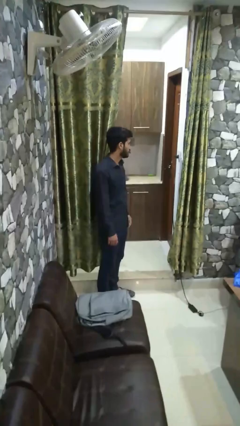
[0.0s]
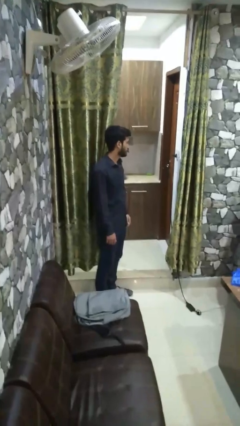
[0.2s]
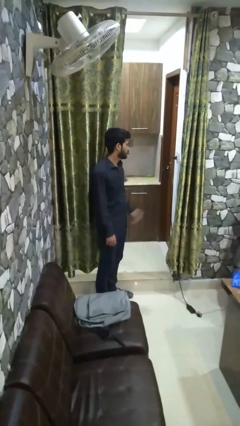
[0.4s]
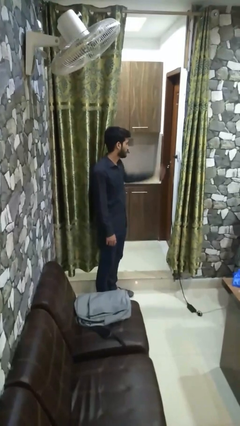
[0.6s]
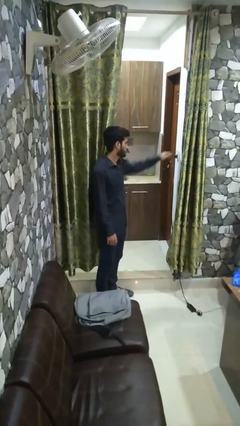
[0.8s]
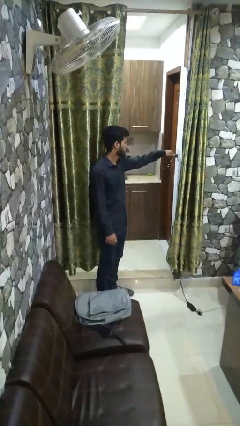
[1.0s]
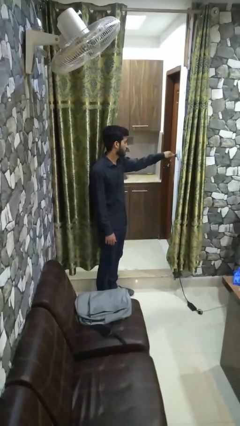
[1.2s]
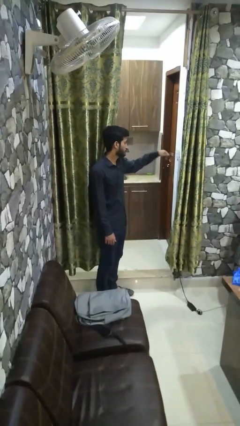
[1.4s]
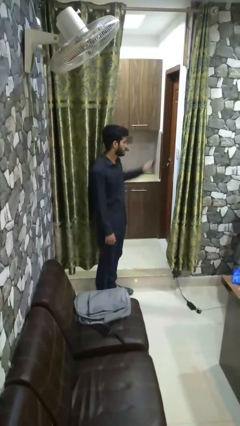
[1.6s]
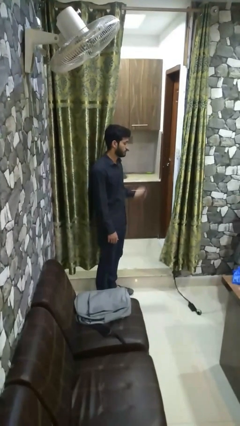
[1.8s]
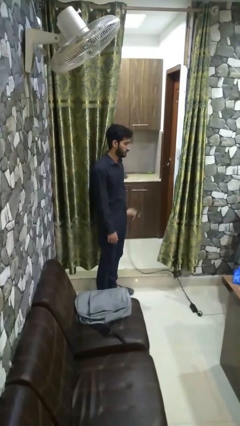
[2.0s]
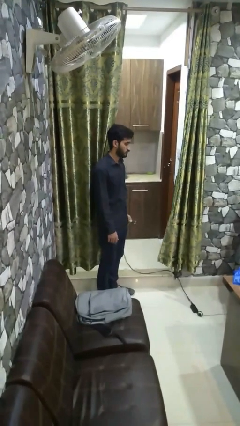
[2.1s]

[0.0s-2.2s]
person unplugs from electrical socket

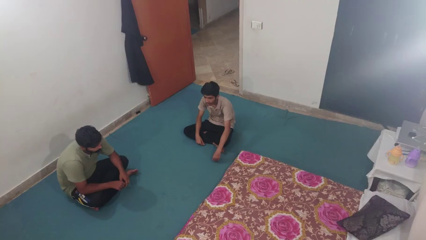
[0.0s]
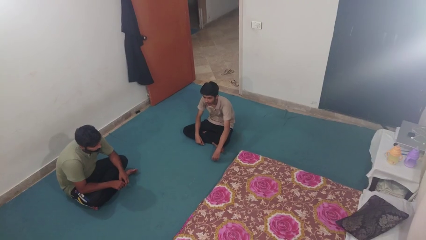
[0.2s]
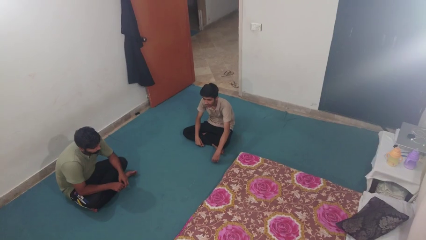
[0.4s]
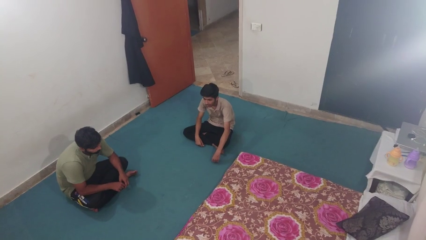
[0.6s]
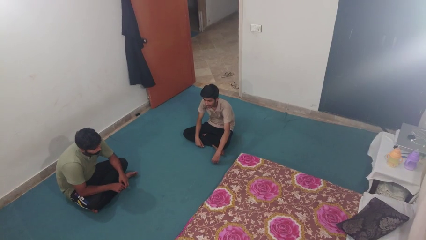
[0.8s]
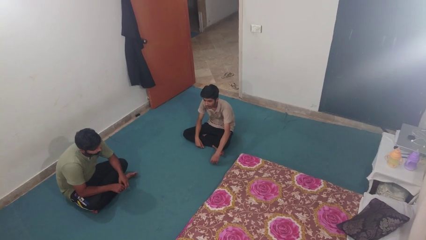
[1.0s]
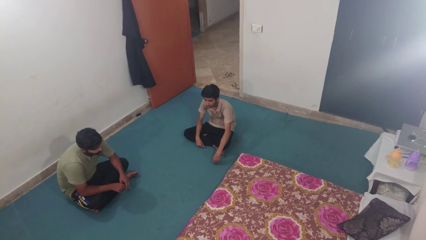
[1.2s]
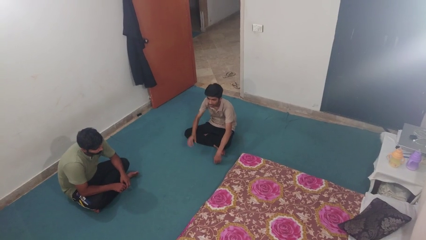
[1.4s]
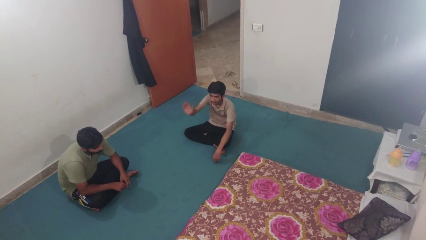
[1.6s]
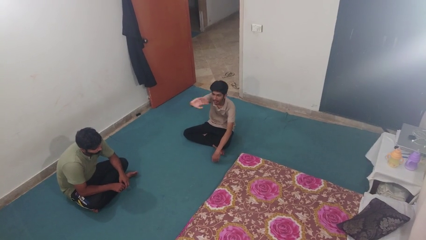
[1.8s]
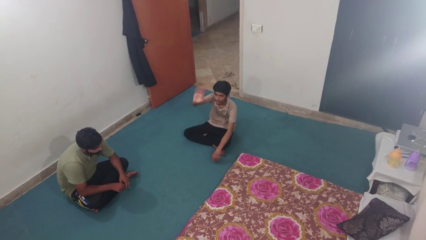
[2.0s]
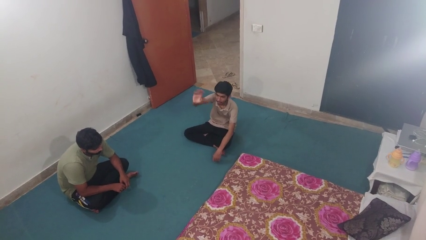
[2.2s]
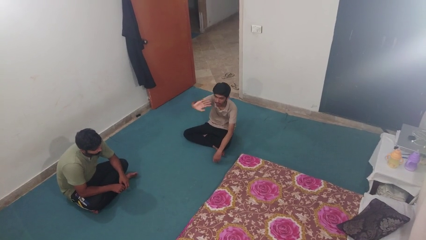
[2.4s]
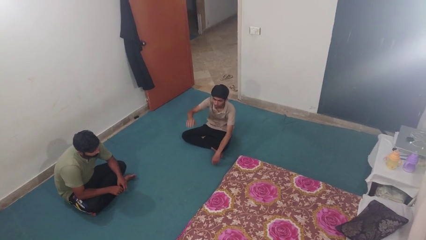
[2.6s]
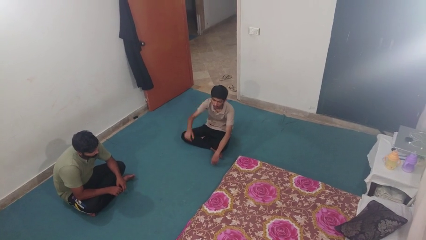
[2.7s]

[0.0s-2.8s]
person waves at person

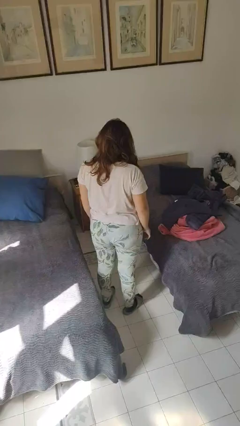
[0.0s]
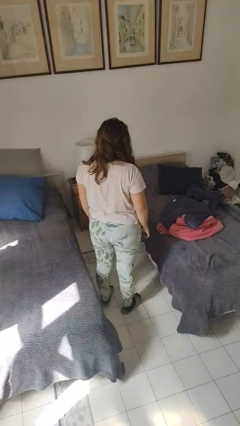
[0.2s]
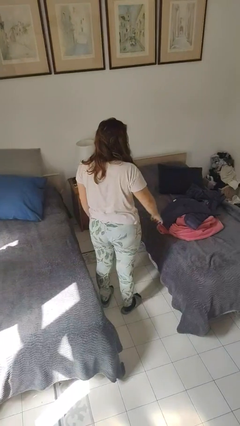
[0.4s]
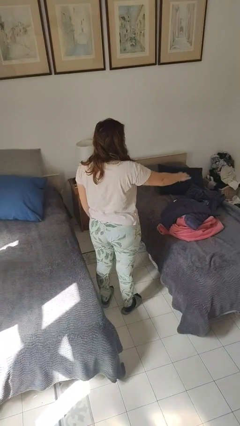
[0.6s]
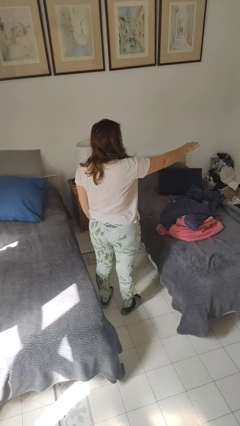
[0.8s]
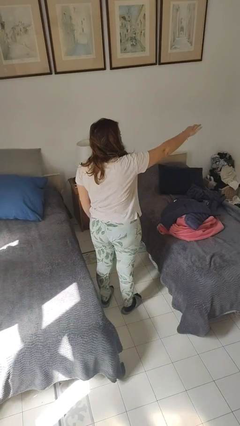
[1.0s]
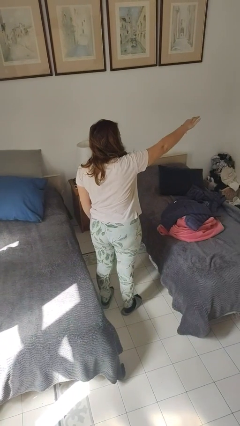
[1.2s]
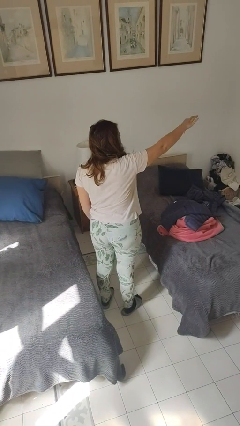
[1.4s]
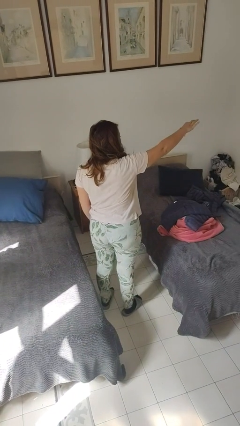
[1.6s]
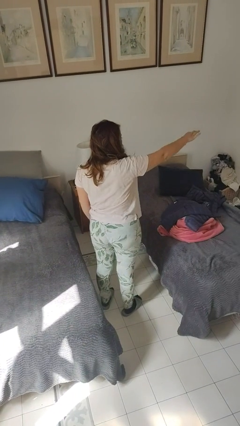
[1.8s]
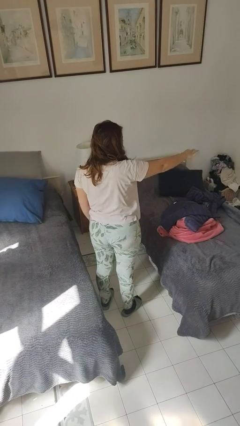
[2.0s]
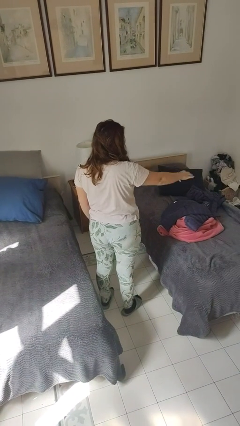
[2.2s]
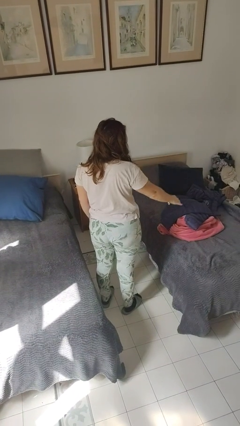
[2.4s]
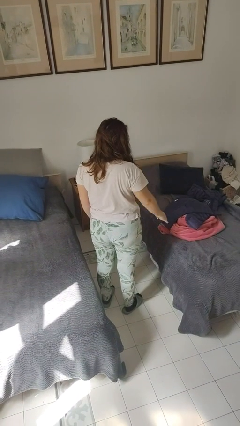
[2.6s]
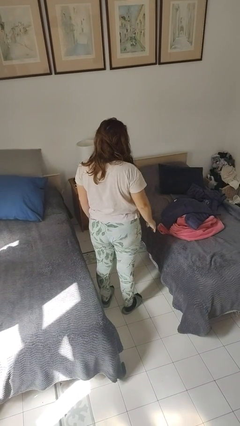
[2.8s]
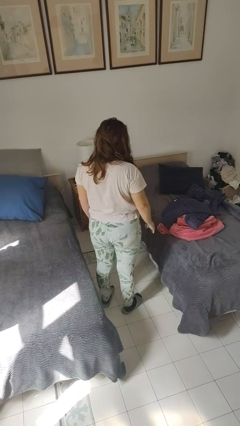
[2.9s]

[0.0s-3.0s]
person gestures hang loose

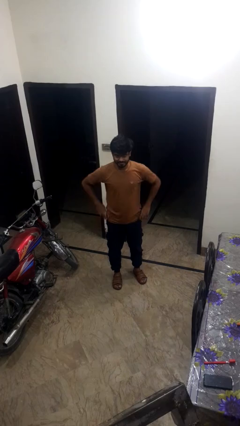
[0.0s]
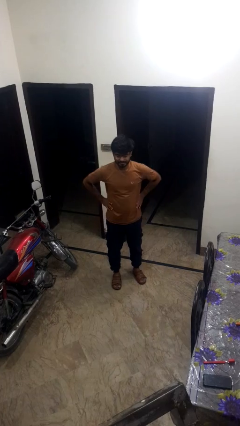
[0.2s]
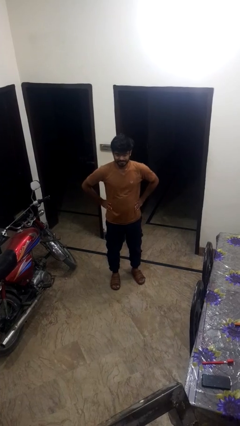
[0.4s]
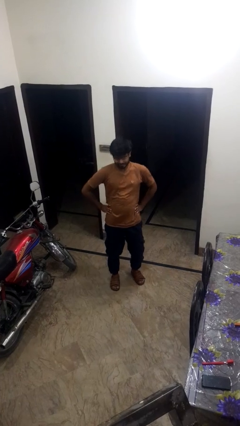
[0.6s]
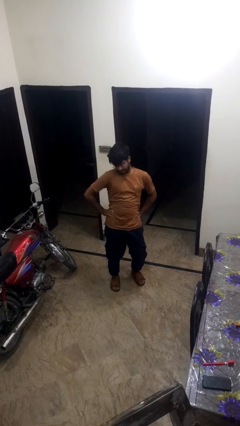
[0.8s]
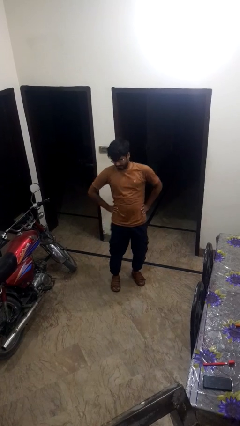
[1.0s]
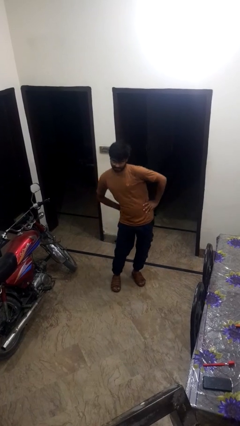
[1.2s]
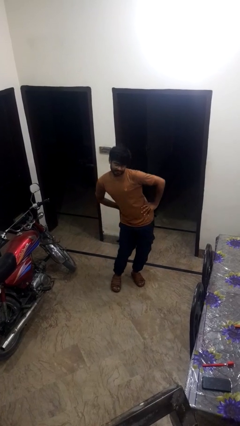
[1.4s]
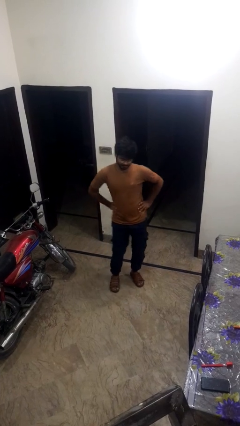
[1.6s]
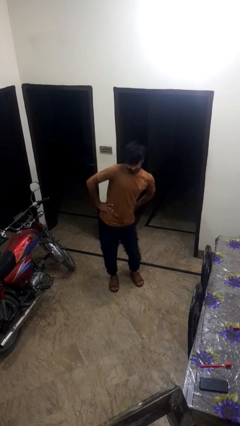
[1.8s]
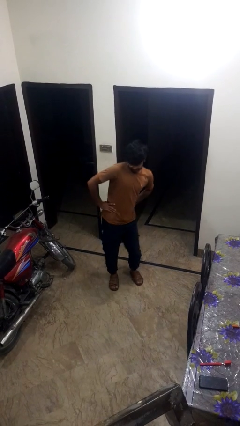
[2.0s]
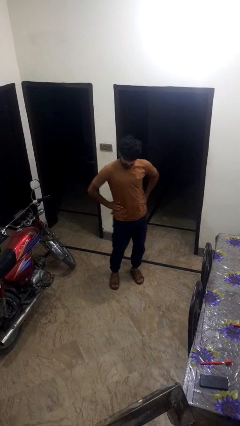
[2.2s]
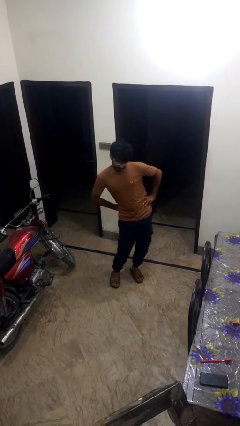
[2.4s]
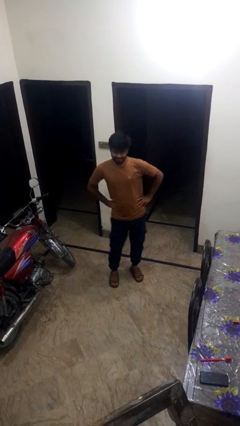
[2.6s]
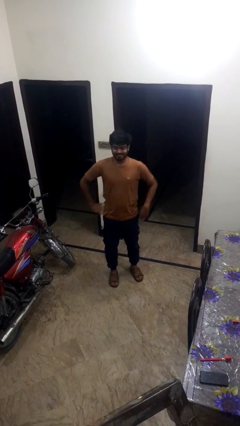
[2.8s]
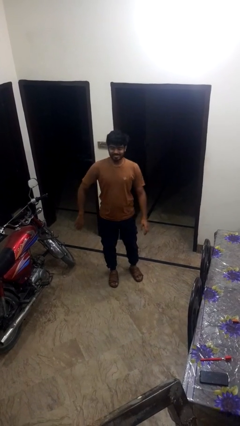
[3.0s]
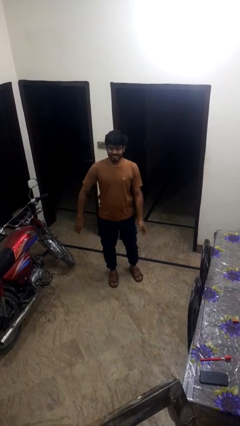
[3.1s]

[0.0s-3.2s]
person wiggles hips

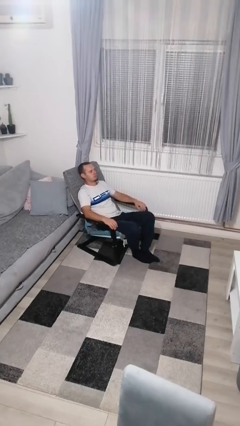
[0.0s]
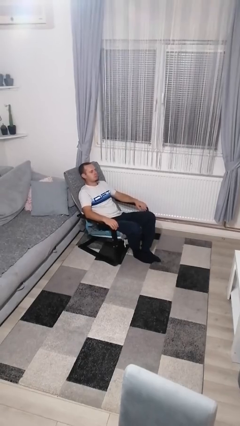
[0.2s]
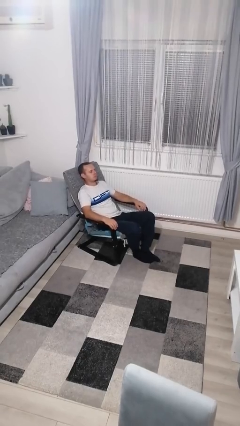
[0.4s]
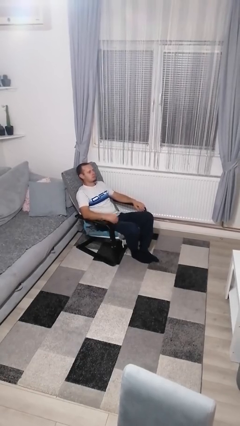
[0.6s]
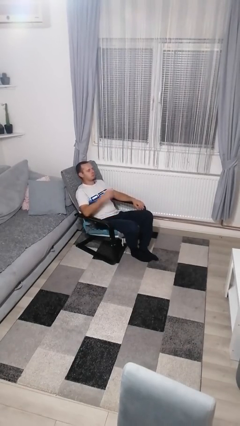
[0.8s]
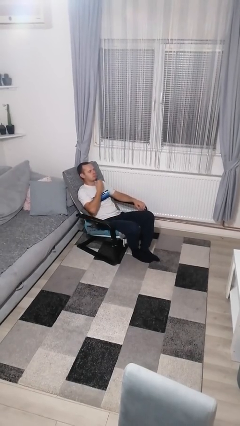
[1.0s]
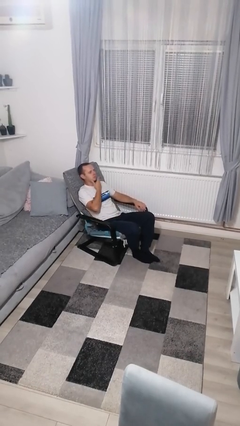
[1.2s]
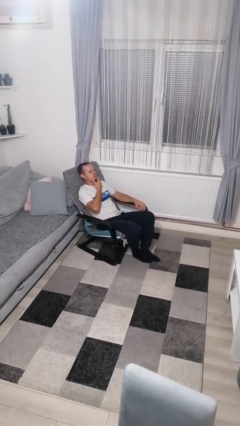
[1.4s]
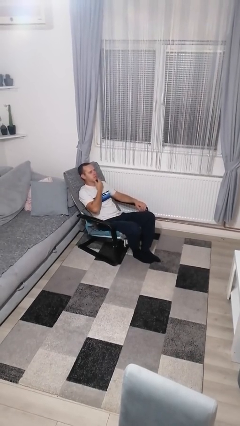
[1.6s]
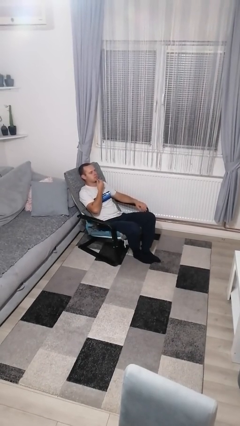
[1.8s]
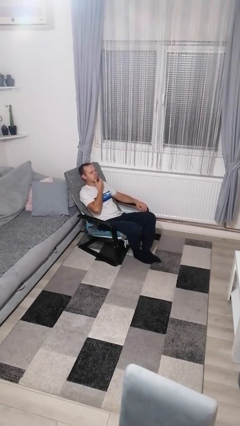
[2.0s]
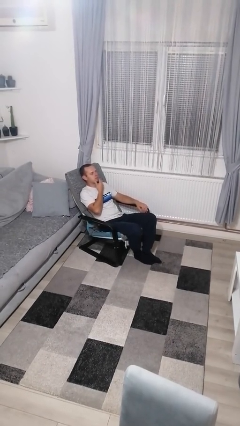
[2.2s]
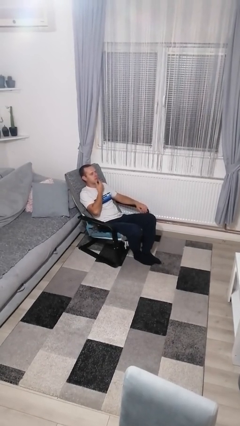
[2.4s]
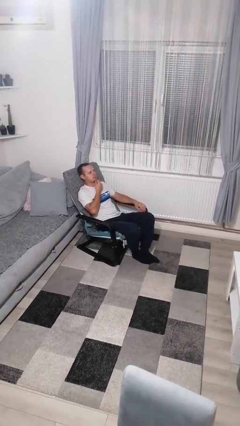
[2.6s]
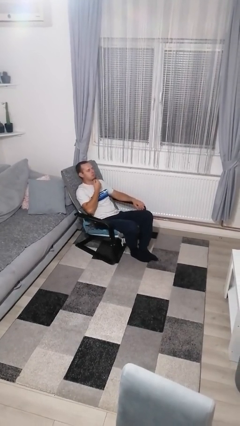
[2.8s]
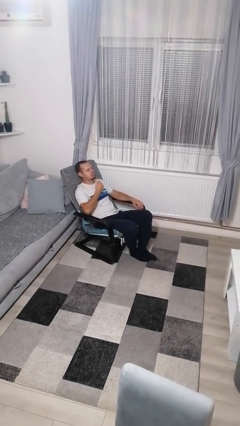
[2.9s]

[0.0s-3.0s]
person strokes chin

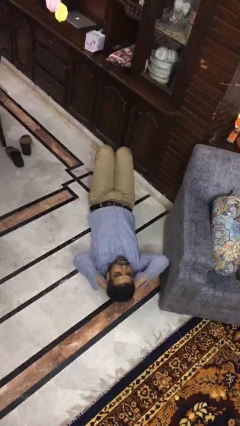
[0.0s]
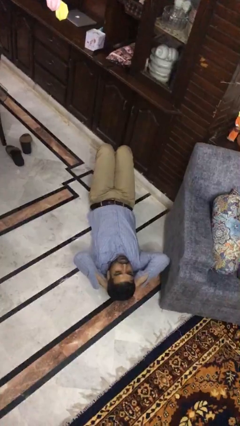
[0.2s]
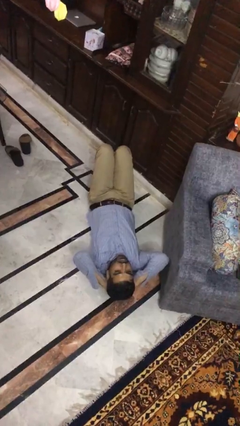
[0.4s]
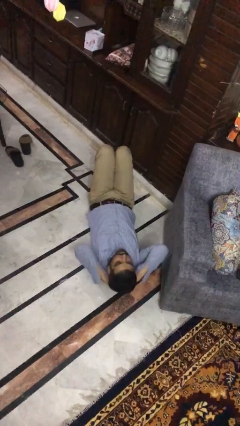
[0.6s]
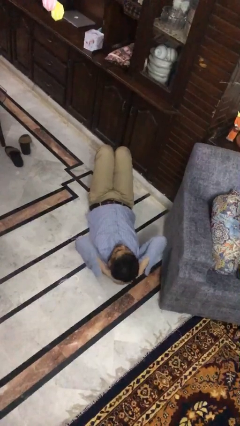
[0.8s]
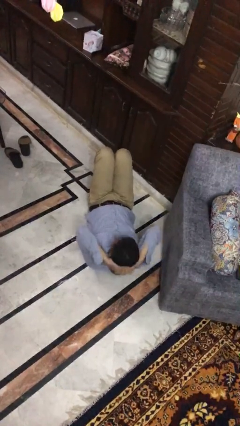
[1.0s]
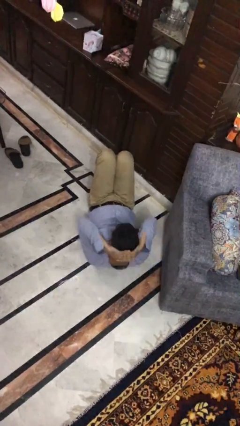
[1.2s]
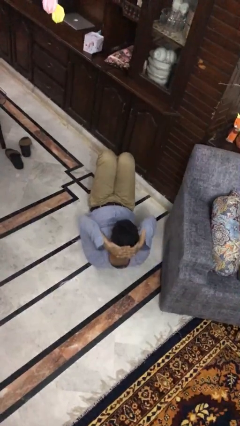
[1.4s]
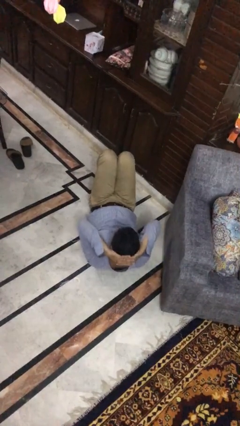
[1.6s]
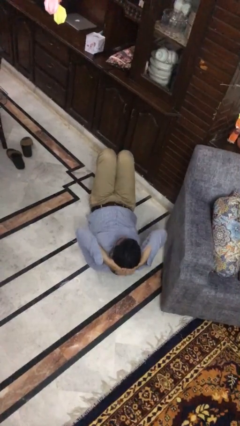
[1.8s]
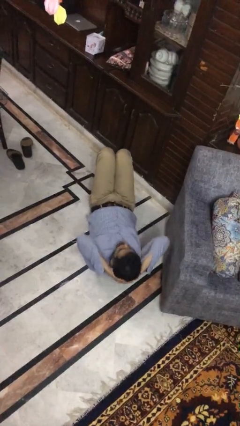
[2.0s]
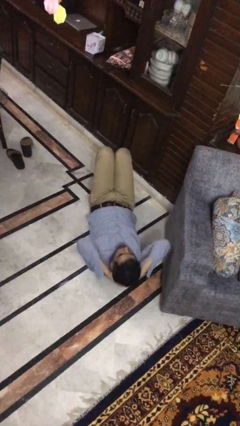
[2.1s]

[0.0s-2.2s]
person exercises with situp

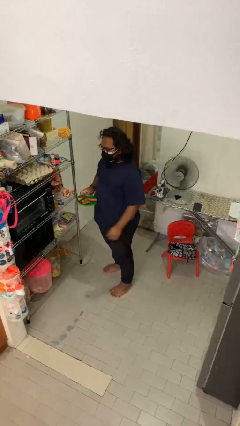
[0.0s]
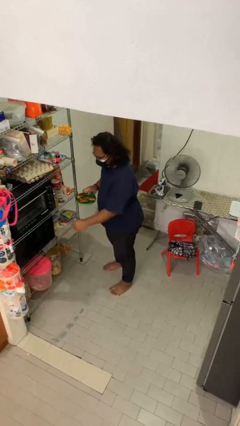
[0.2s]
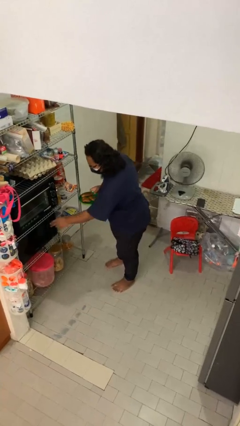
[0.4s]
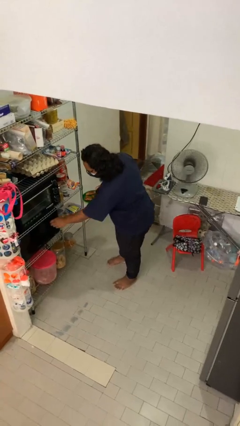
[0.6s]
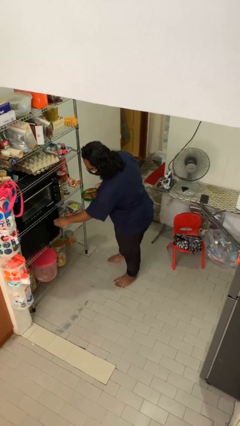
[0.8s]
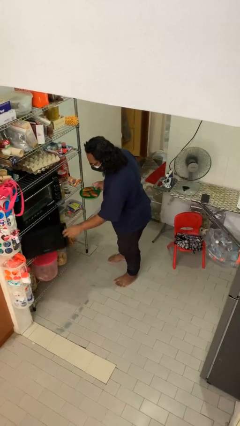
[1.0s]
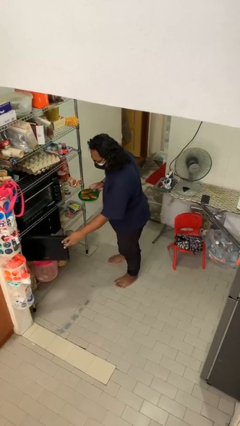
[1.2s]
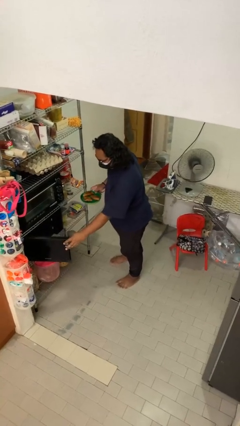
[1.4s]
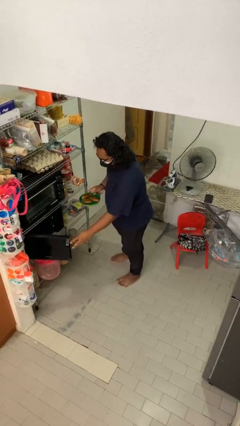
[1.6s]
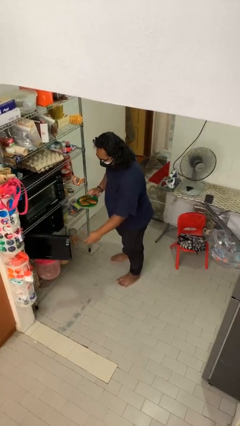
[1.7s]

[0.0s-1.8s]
person opens microwave
